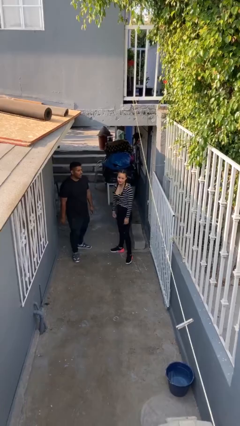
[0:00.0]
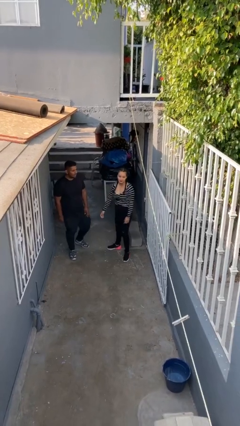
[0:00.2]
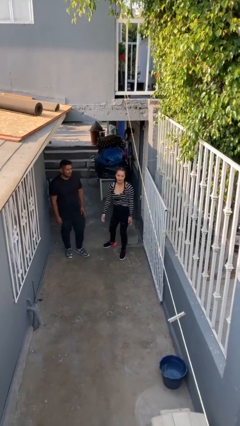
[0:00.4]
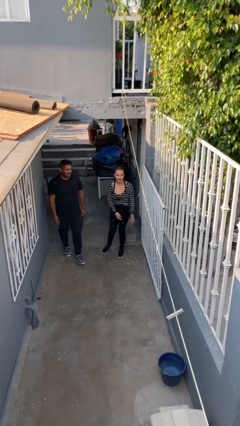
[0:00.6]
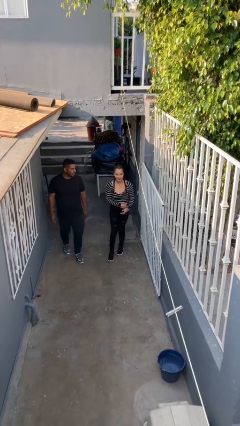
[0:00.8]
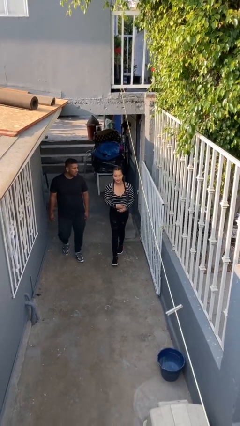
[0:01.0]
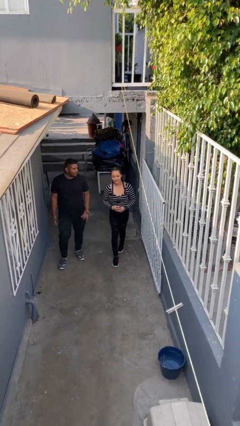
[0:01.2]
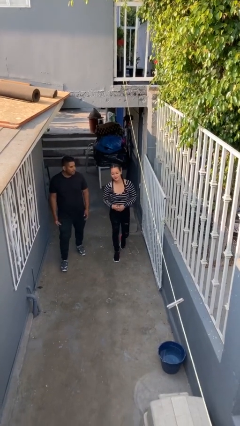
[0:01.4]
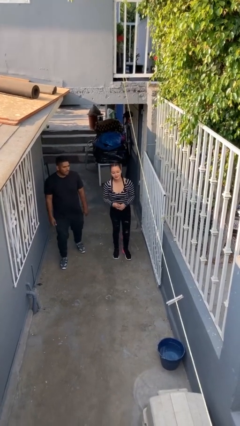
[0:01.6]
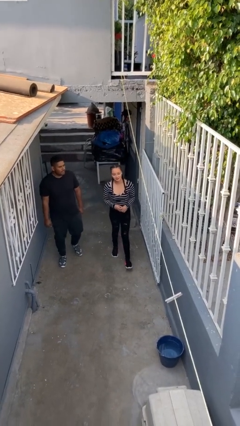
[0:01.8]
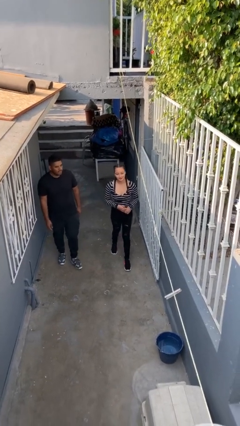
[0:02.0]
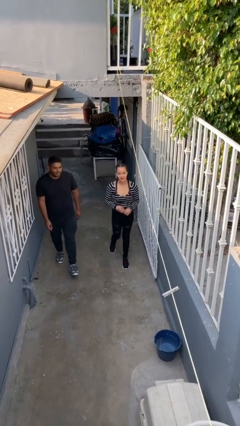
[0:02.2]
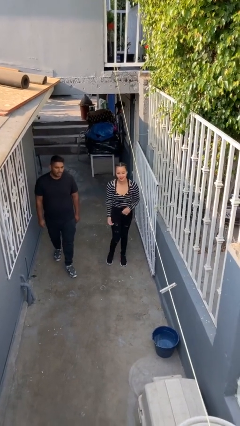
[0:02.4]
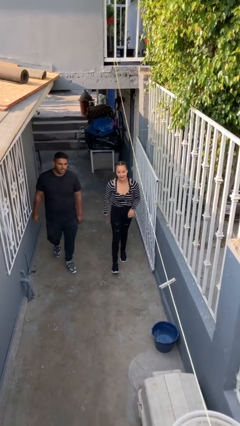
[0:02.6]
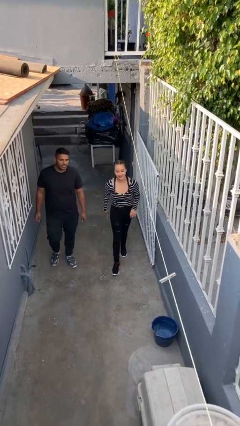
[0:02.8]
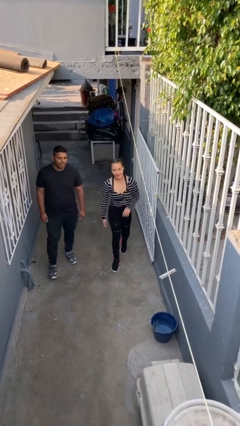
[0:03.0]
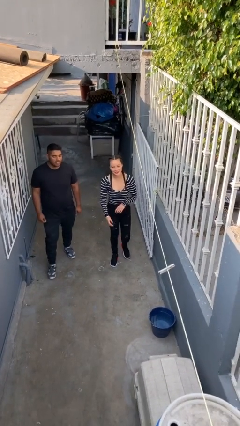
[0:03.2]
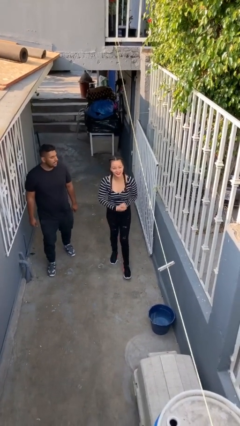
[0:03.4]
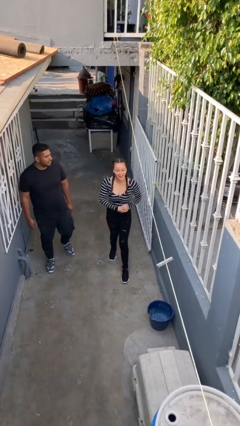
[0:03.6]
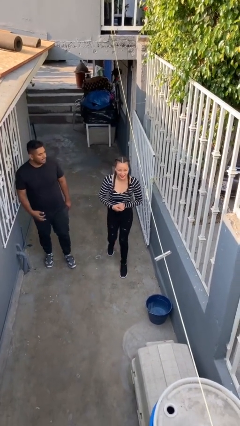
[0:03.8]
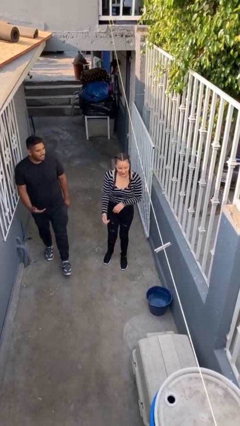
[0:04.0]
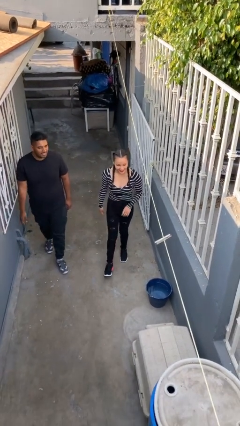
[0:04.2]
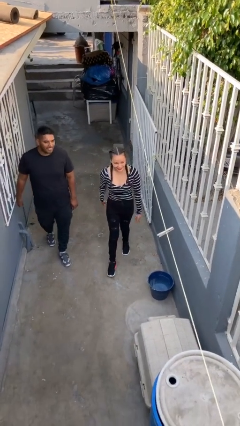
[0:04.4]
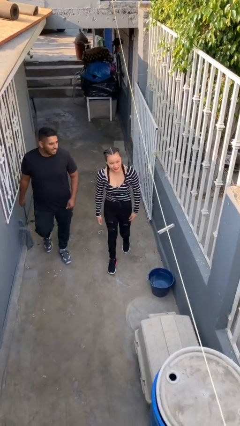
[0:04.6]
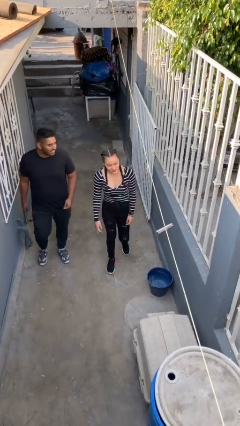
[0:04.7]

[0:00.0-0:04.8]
person talks to person

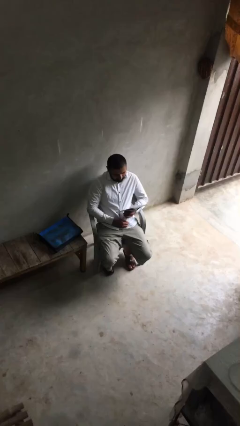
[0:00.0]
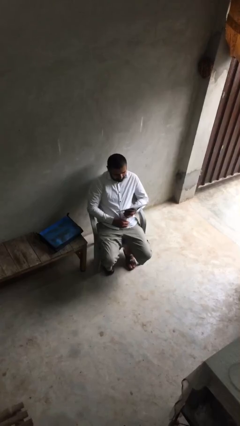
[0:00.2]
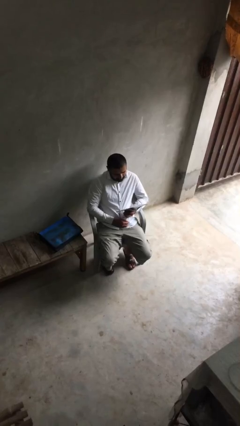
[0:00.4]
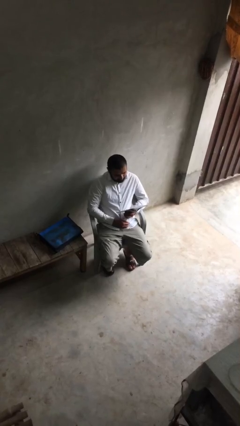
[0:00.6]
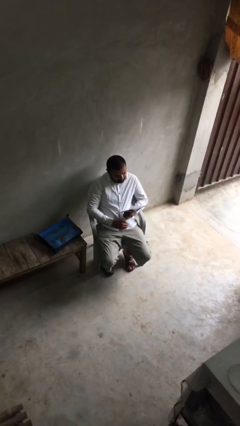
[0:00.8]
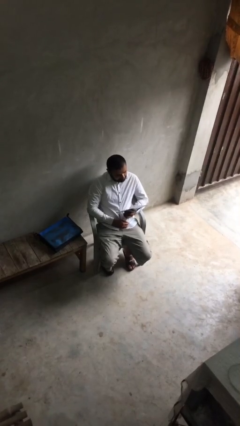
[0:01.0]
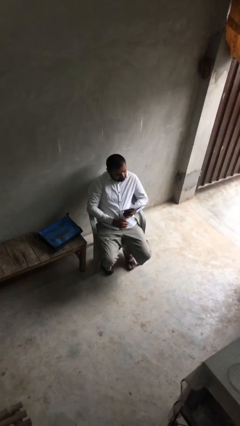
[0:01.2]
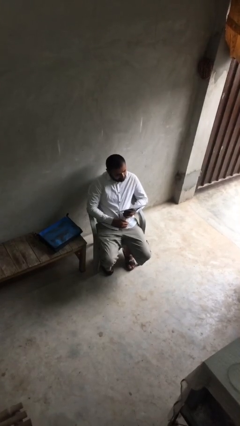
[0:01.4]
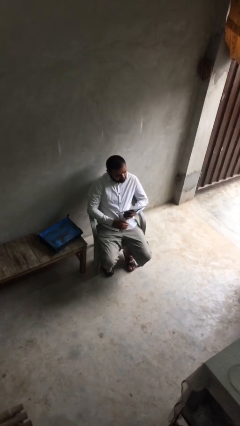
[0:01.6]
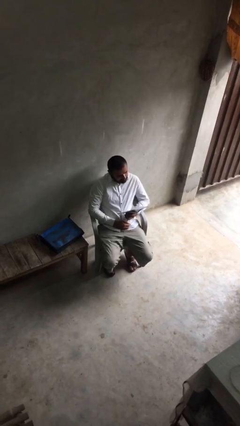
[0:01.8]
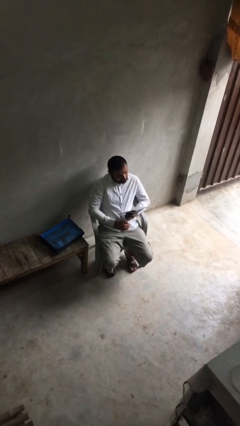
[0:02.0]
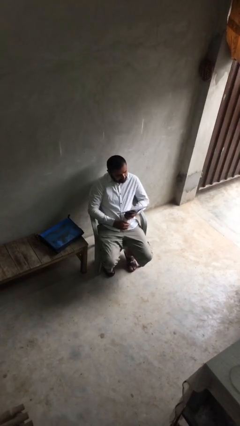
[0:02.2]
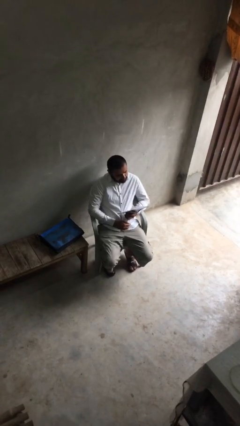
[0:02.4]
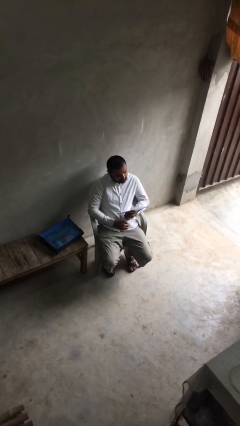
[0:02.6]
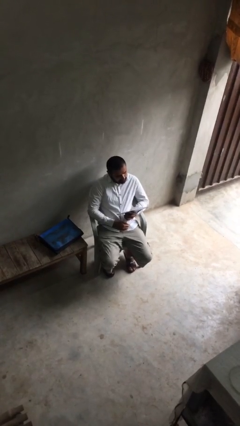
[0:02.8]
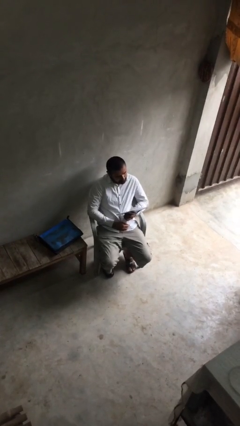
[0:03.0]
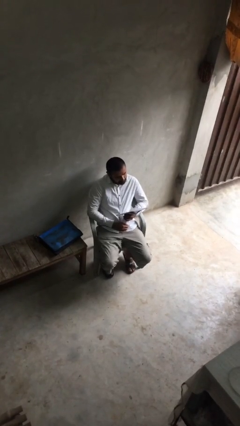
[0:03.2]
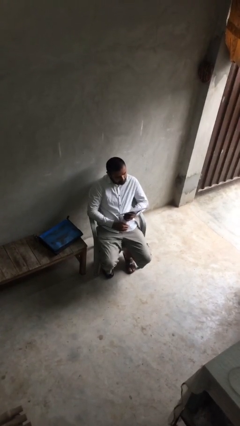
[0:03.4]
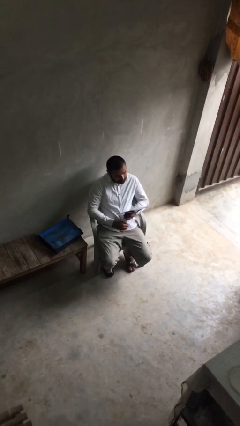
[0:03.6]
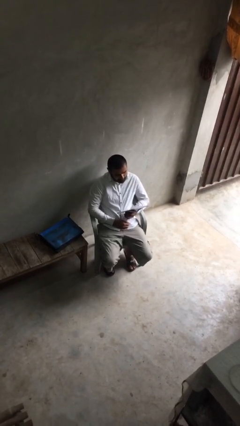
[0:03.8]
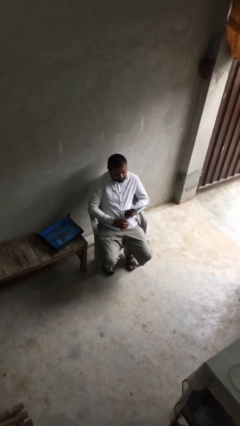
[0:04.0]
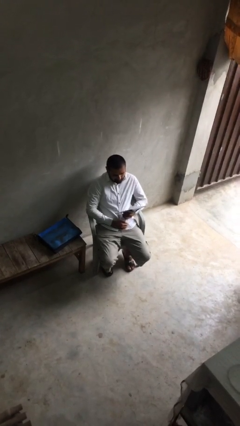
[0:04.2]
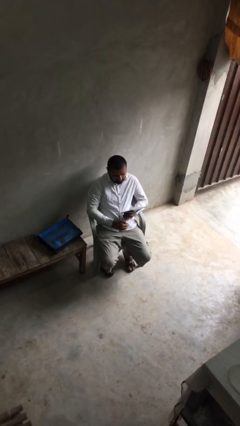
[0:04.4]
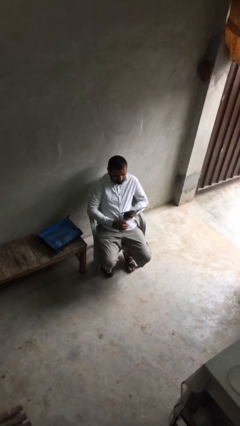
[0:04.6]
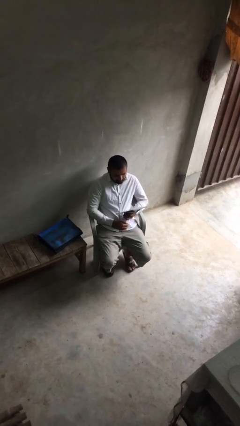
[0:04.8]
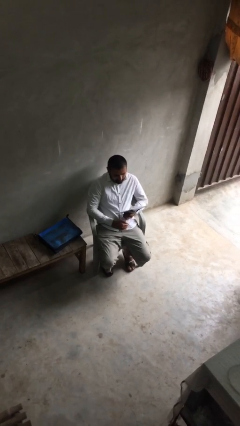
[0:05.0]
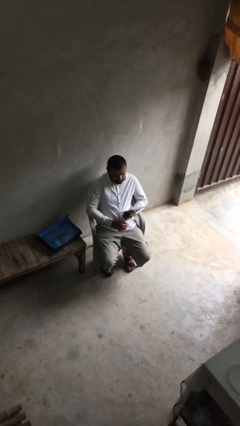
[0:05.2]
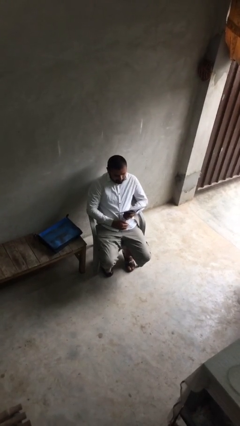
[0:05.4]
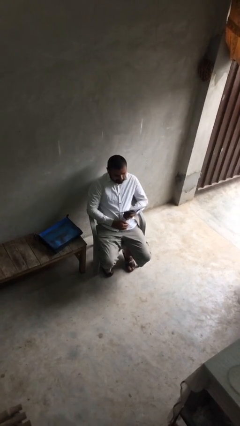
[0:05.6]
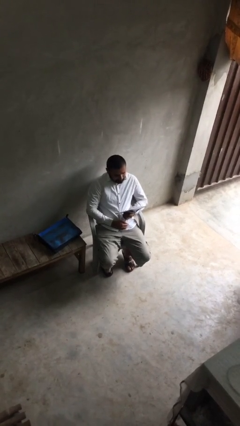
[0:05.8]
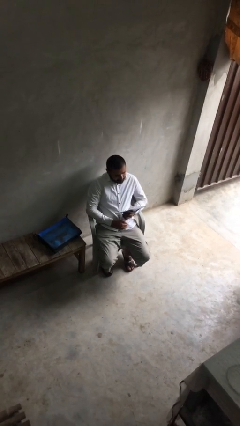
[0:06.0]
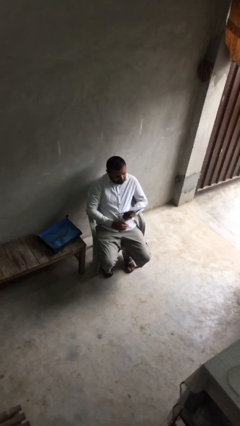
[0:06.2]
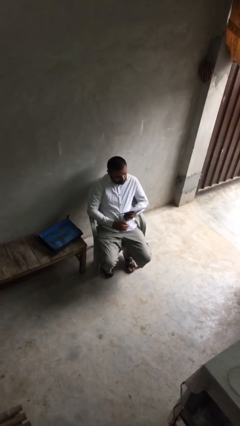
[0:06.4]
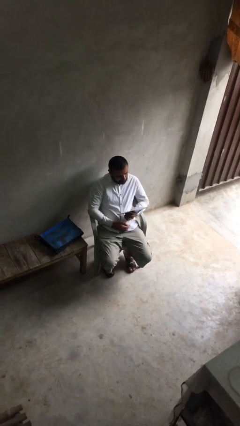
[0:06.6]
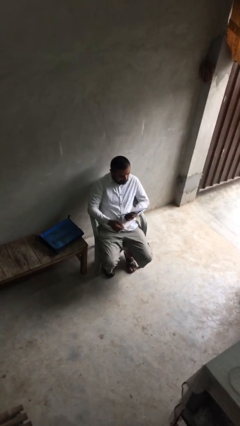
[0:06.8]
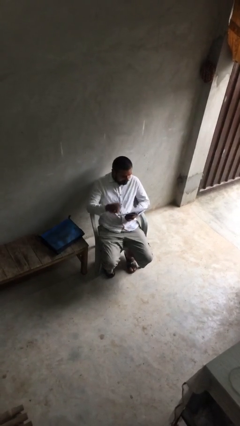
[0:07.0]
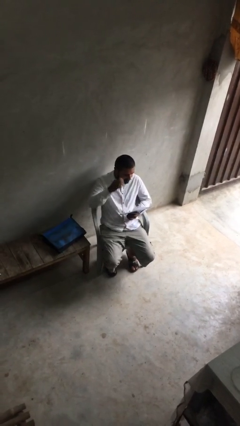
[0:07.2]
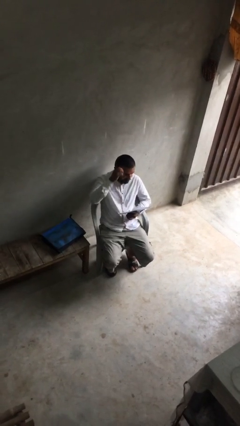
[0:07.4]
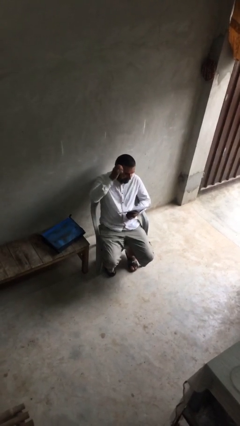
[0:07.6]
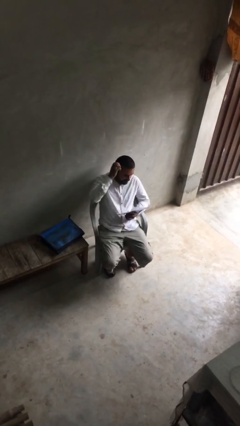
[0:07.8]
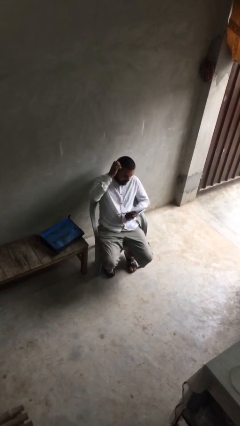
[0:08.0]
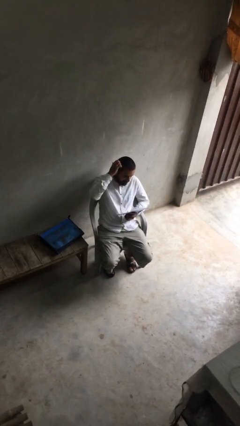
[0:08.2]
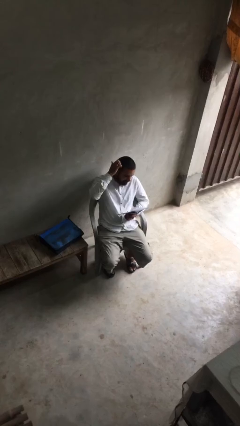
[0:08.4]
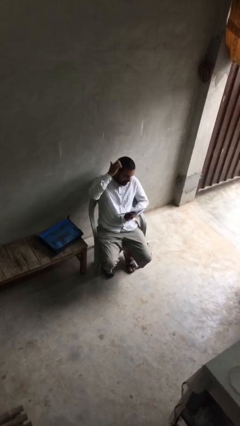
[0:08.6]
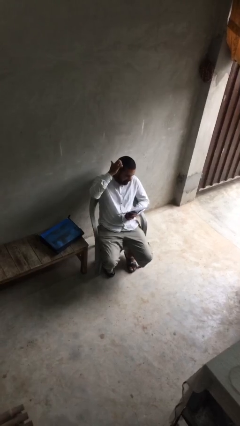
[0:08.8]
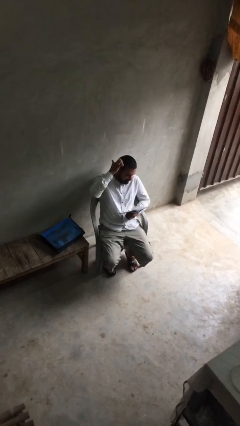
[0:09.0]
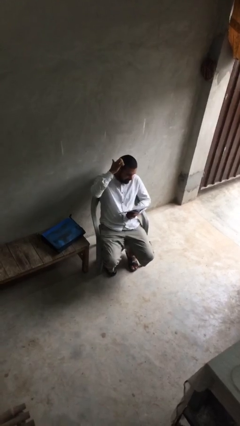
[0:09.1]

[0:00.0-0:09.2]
person reads document

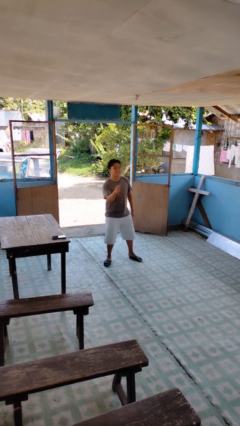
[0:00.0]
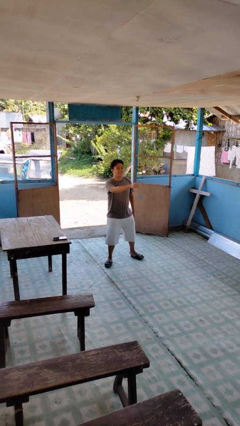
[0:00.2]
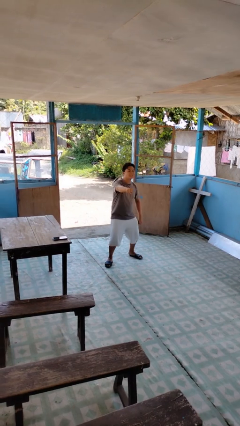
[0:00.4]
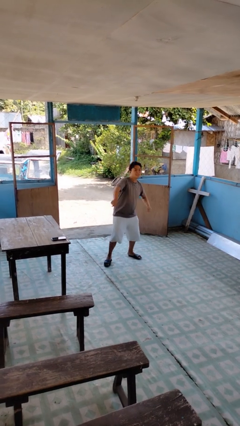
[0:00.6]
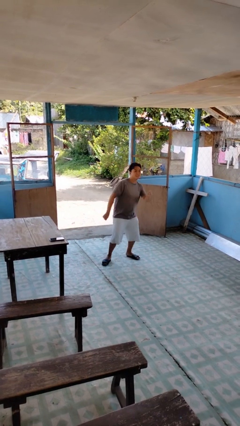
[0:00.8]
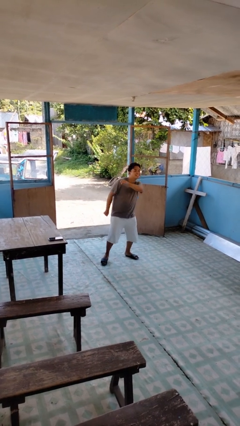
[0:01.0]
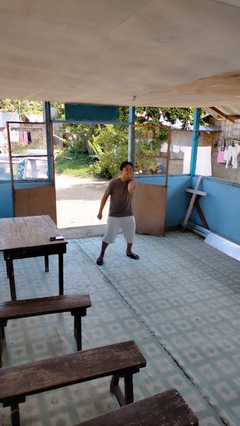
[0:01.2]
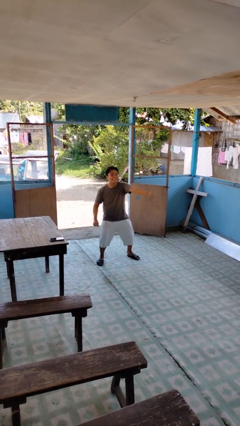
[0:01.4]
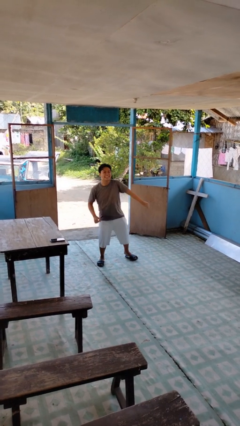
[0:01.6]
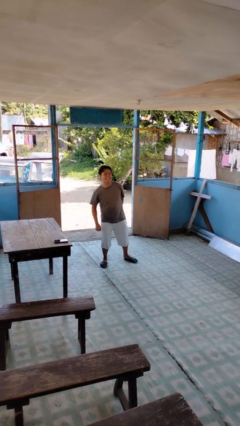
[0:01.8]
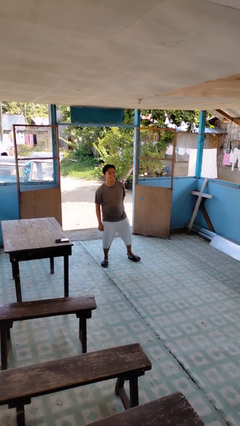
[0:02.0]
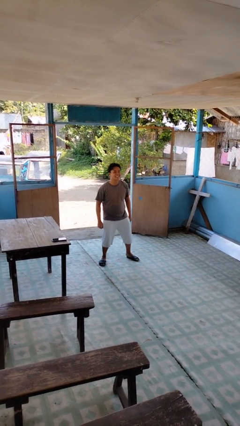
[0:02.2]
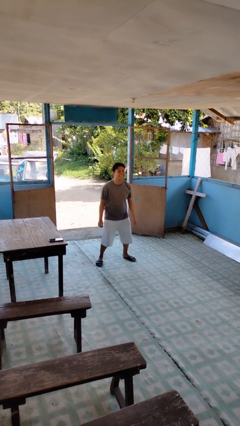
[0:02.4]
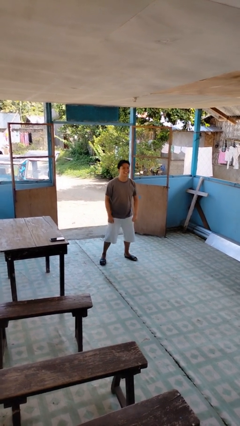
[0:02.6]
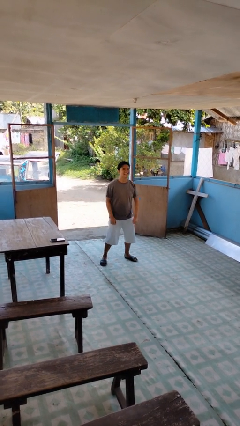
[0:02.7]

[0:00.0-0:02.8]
person dances in place

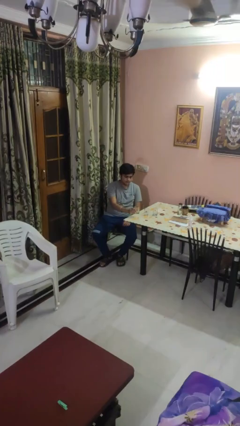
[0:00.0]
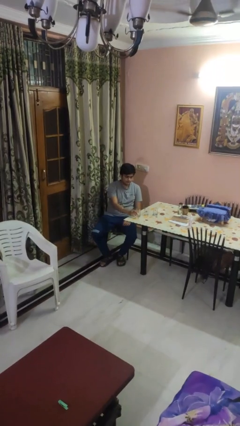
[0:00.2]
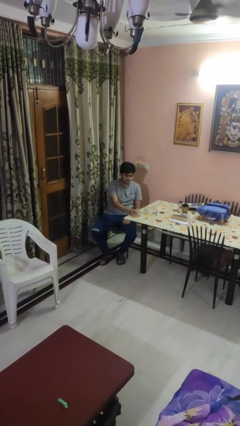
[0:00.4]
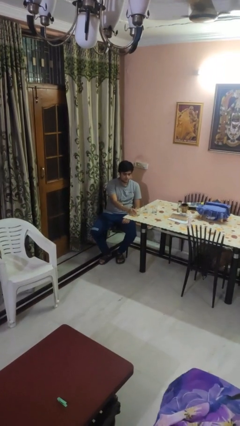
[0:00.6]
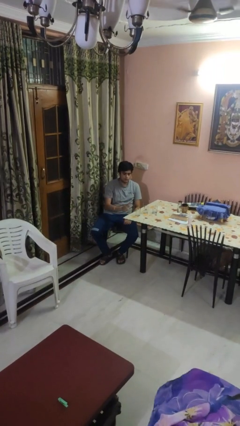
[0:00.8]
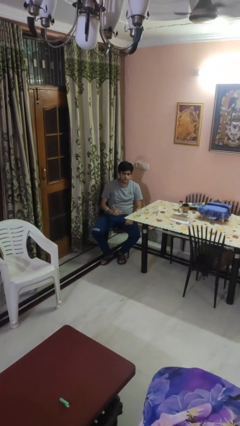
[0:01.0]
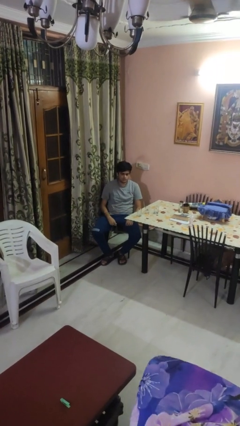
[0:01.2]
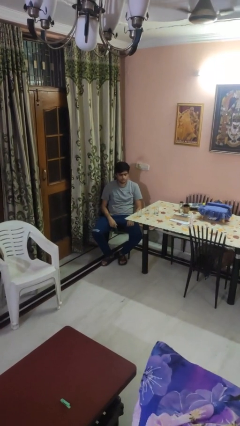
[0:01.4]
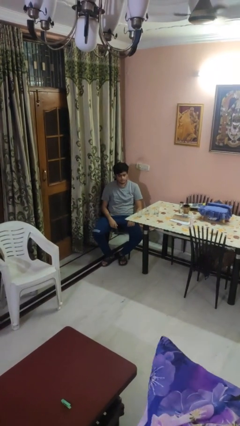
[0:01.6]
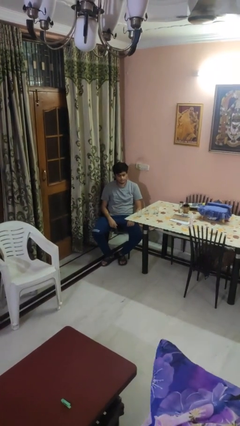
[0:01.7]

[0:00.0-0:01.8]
person puts down object on table
